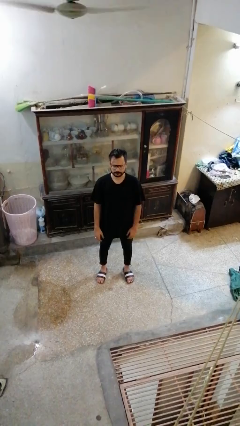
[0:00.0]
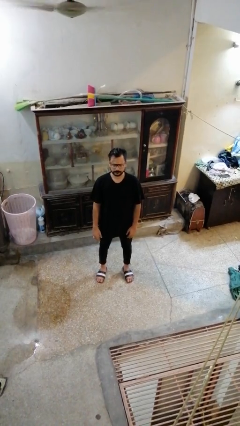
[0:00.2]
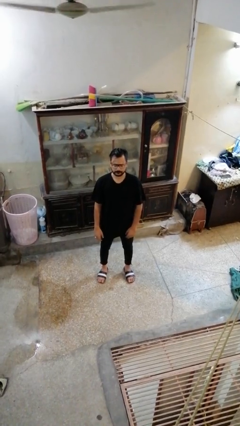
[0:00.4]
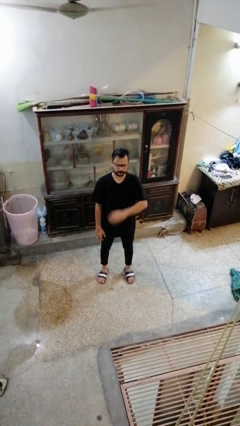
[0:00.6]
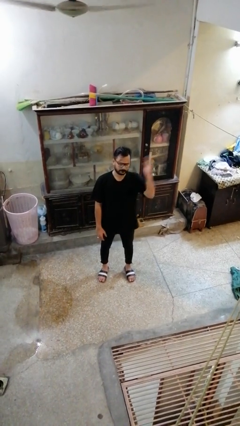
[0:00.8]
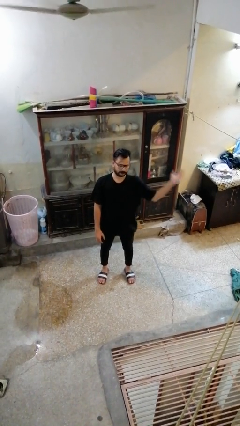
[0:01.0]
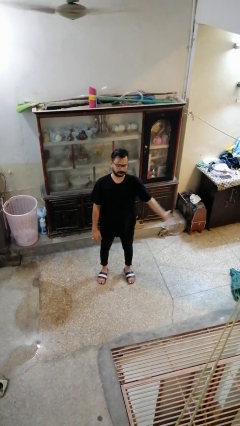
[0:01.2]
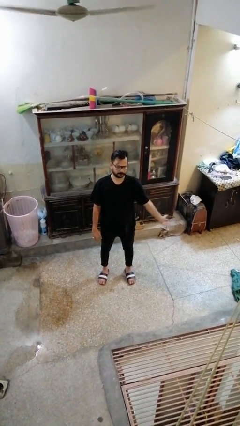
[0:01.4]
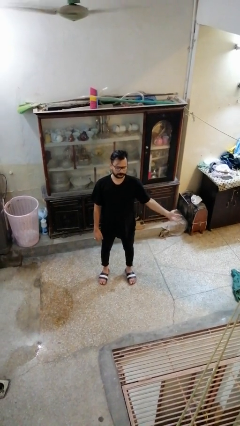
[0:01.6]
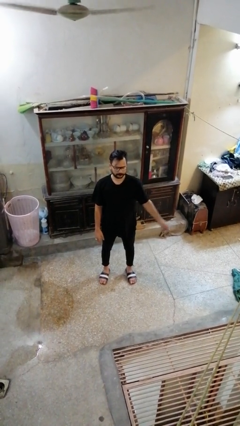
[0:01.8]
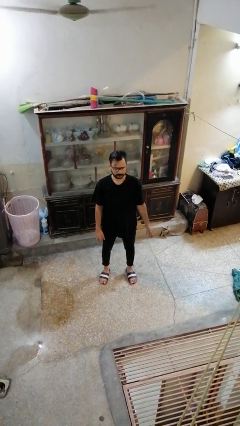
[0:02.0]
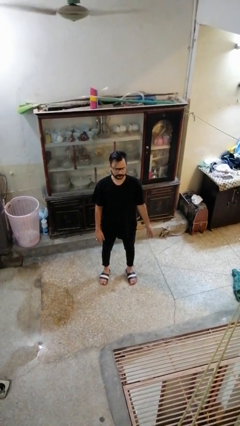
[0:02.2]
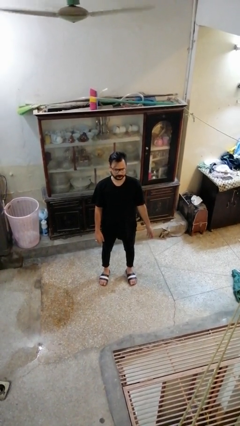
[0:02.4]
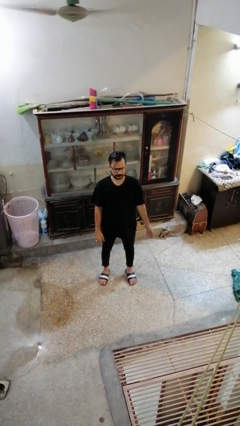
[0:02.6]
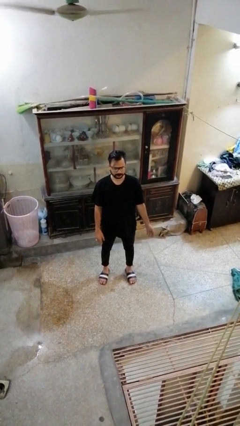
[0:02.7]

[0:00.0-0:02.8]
person gestures swipe left

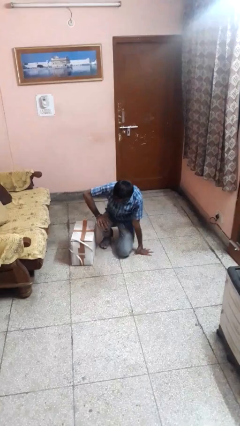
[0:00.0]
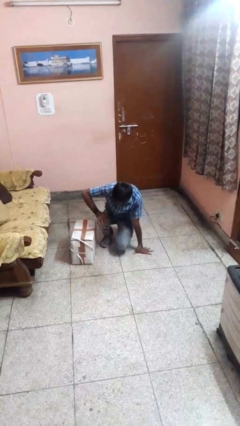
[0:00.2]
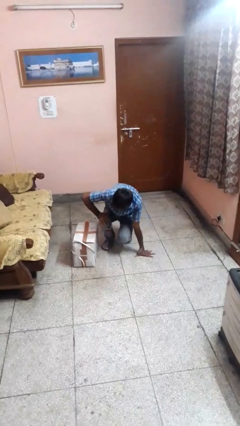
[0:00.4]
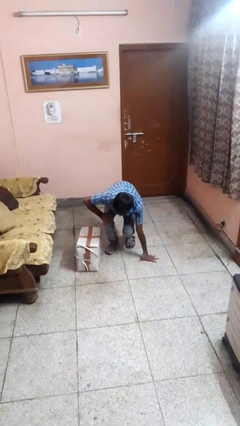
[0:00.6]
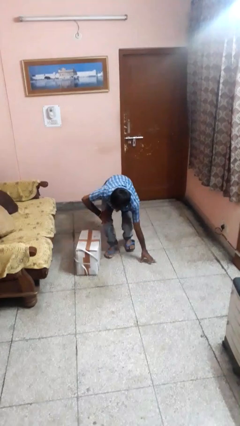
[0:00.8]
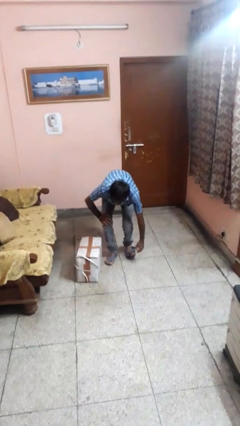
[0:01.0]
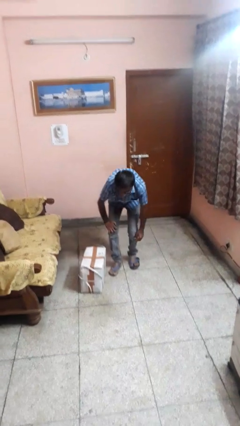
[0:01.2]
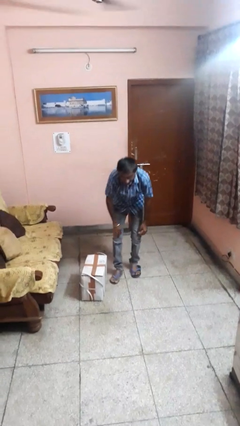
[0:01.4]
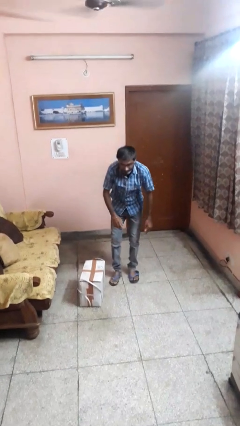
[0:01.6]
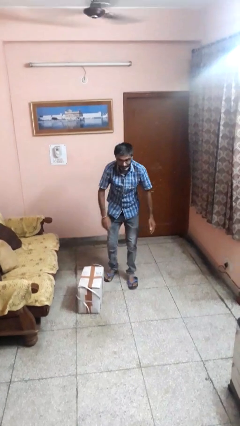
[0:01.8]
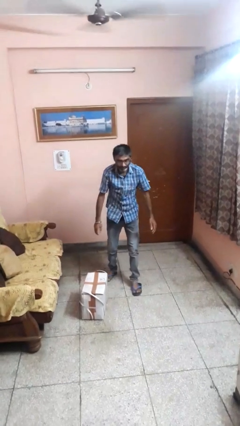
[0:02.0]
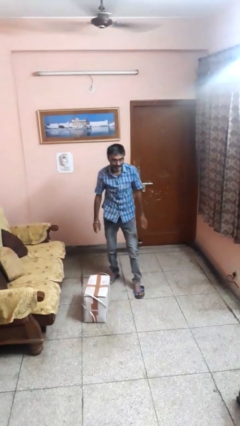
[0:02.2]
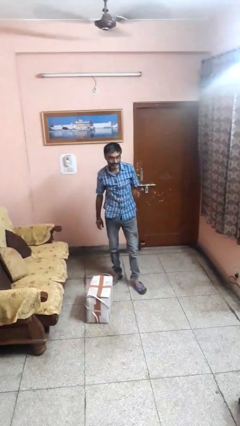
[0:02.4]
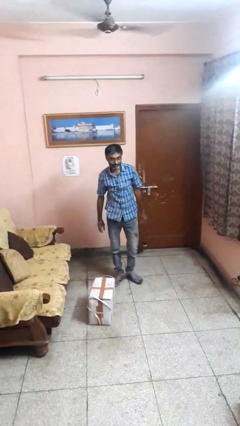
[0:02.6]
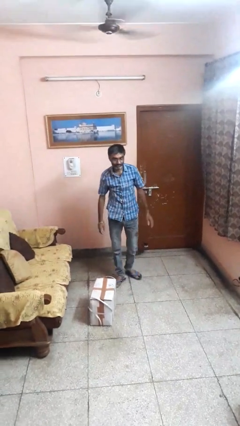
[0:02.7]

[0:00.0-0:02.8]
person stands up from floor

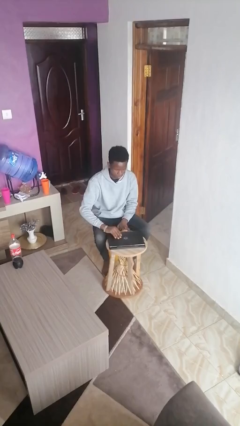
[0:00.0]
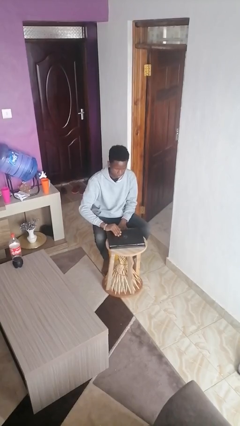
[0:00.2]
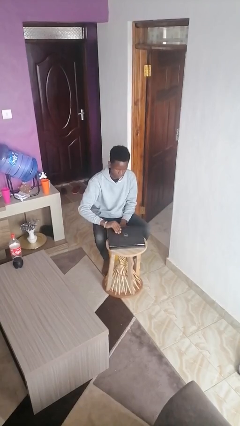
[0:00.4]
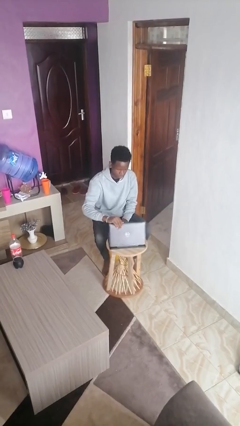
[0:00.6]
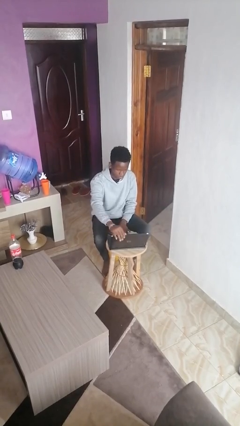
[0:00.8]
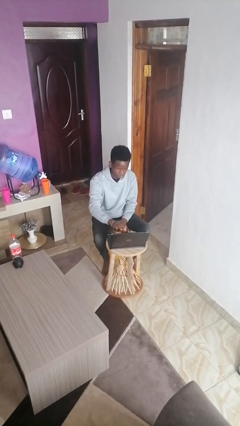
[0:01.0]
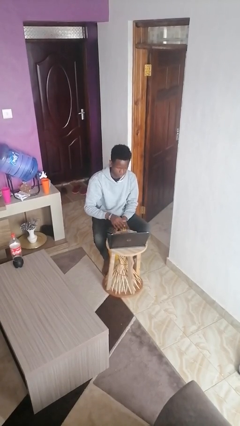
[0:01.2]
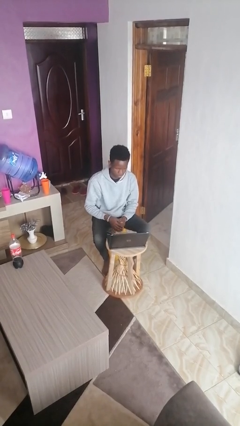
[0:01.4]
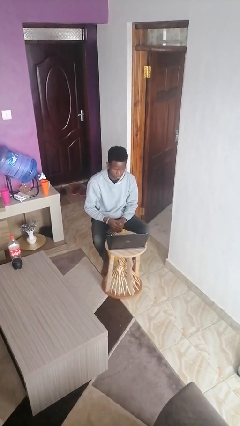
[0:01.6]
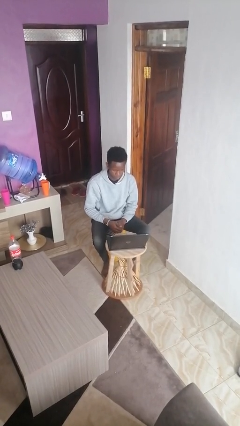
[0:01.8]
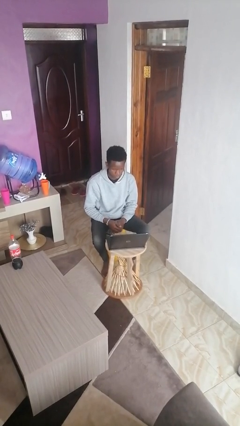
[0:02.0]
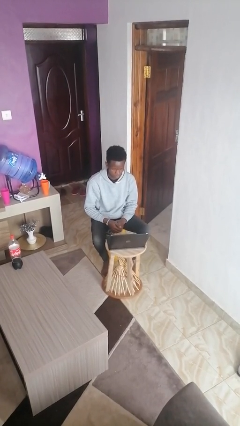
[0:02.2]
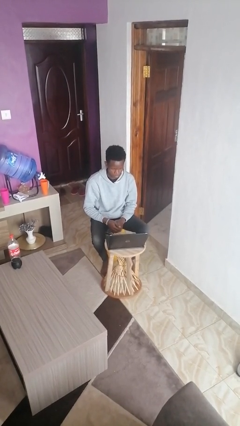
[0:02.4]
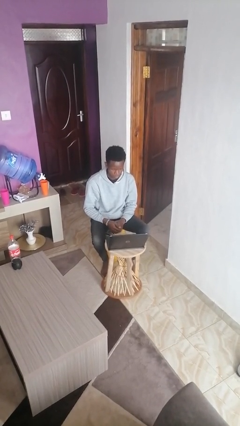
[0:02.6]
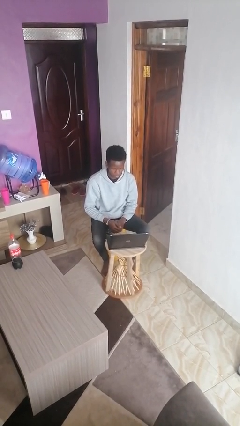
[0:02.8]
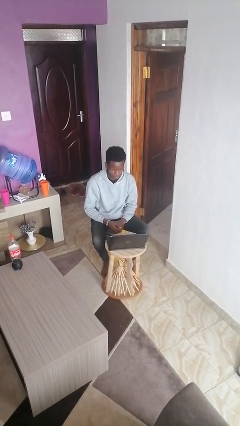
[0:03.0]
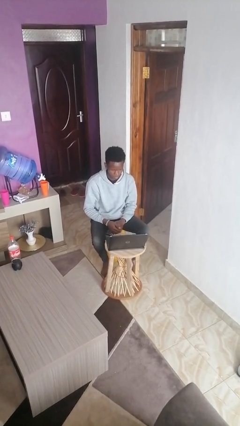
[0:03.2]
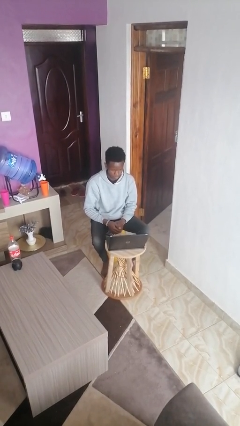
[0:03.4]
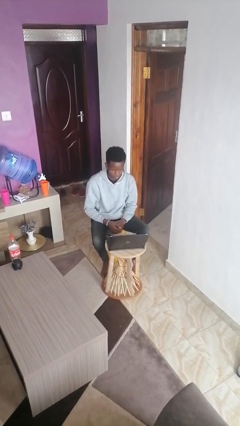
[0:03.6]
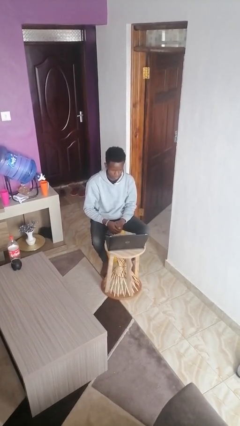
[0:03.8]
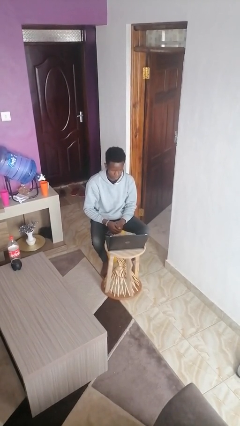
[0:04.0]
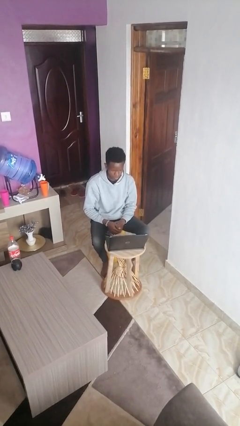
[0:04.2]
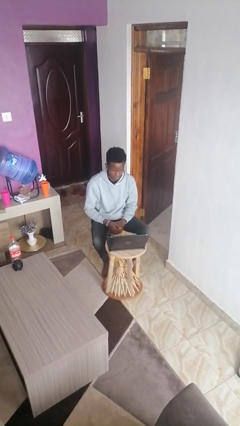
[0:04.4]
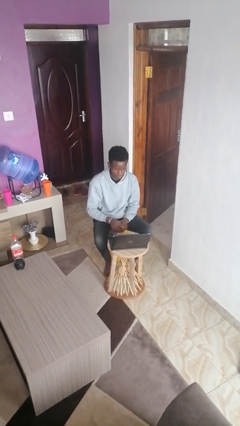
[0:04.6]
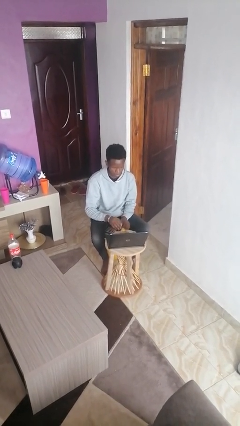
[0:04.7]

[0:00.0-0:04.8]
person opens laptop

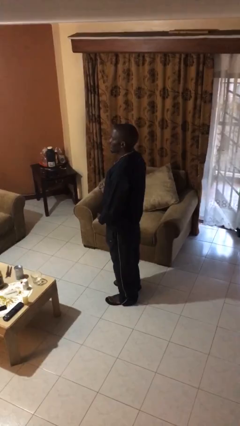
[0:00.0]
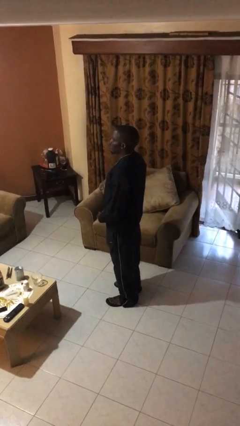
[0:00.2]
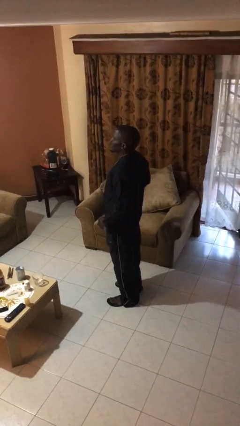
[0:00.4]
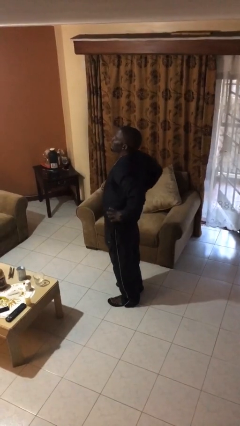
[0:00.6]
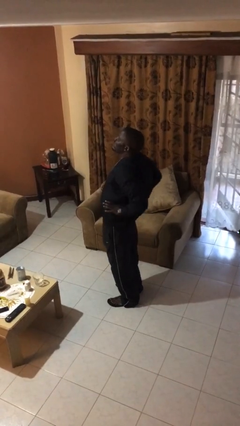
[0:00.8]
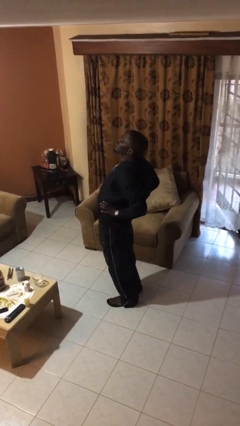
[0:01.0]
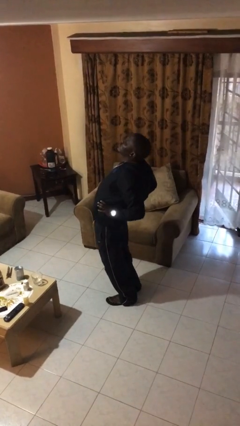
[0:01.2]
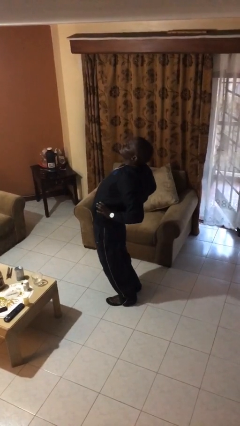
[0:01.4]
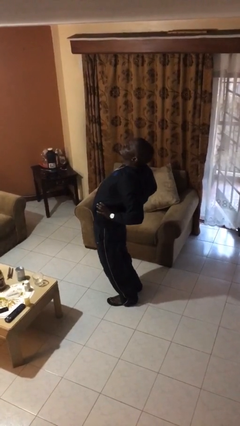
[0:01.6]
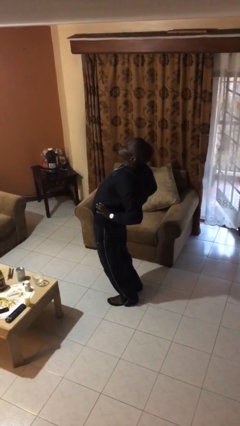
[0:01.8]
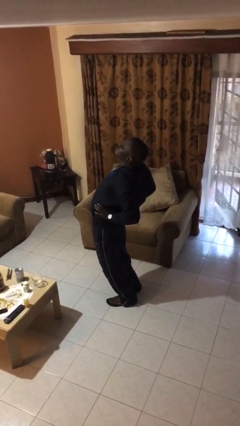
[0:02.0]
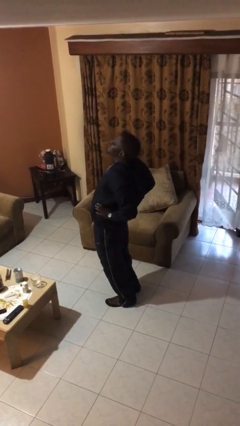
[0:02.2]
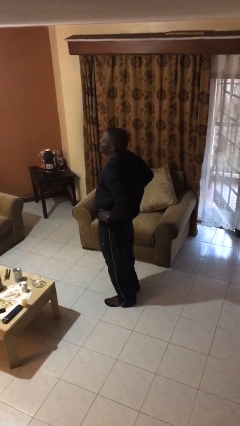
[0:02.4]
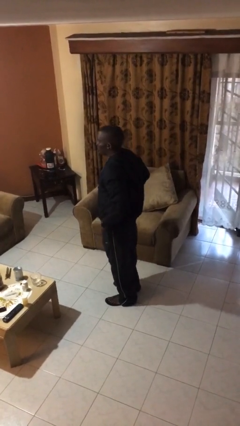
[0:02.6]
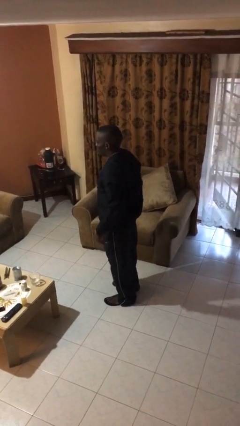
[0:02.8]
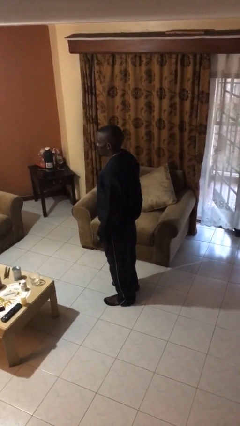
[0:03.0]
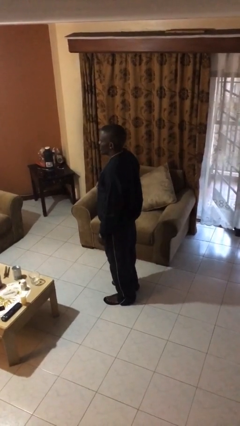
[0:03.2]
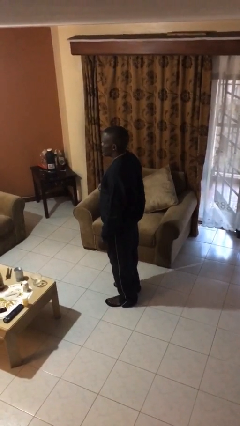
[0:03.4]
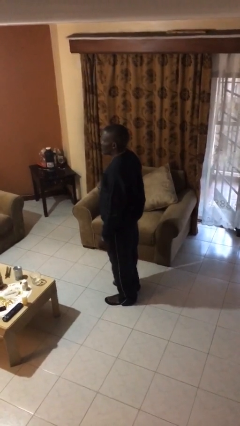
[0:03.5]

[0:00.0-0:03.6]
person stretches back

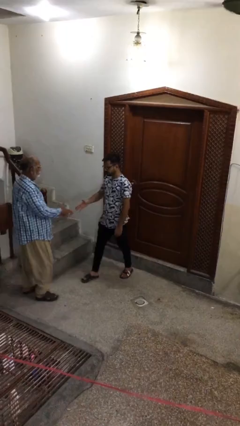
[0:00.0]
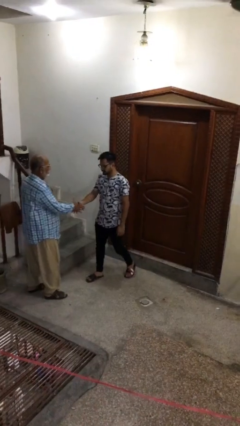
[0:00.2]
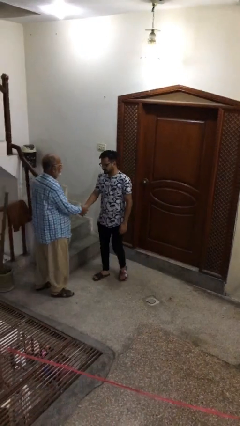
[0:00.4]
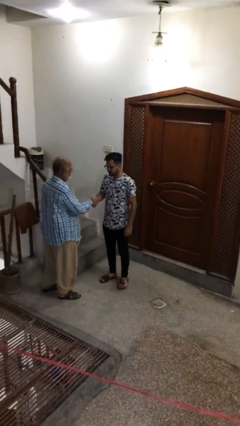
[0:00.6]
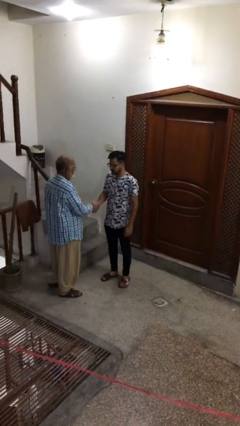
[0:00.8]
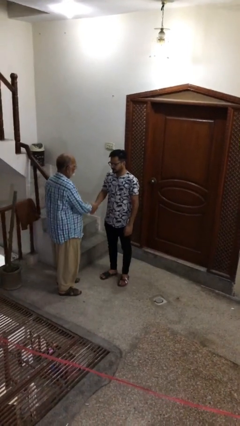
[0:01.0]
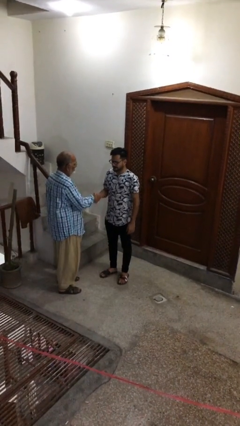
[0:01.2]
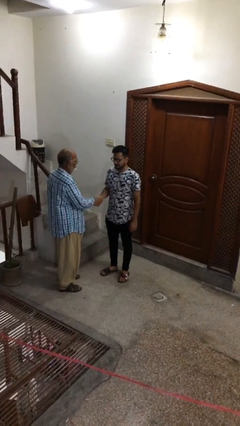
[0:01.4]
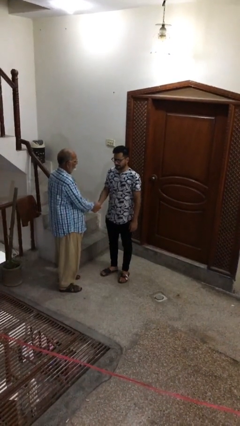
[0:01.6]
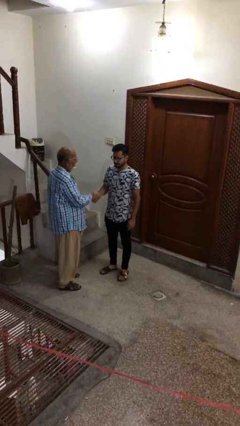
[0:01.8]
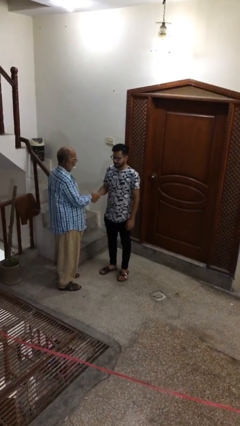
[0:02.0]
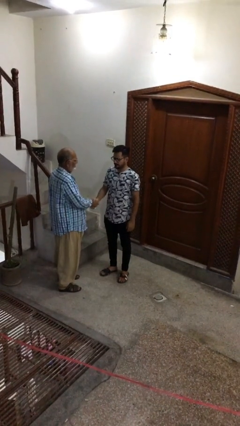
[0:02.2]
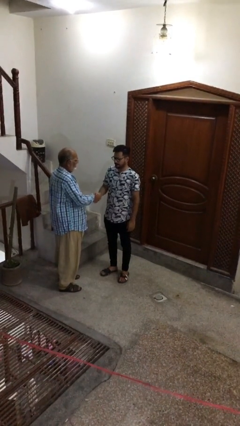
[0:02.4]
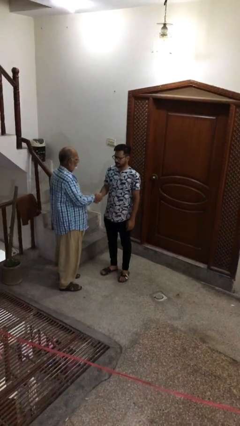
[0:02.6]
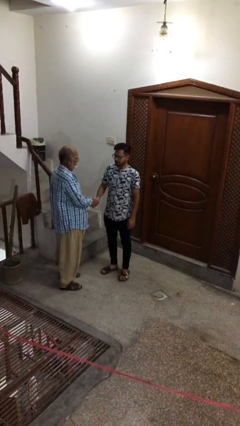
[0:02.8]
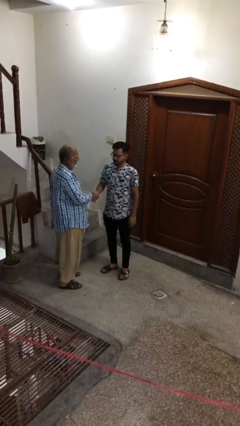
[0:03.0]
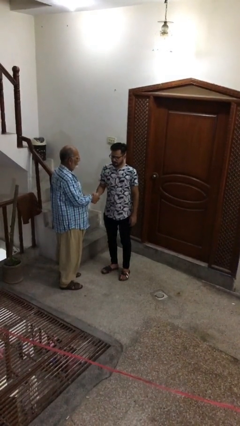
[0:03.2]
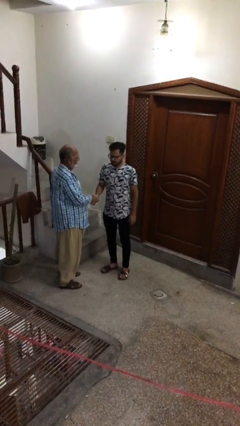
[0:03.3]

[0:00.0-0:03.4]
person shakes hand
